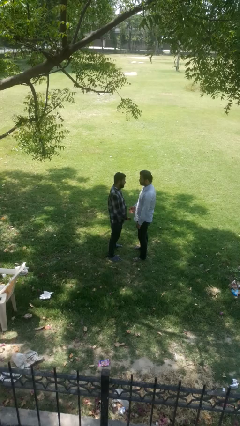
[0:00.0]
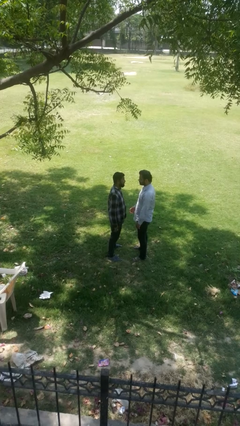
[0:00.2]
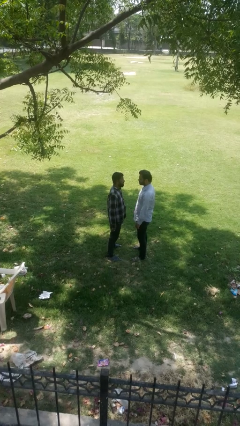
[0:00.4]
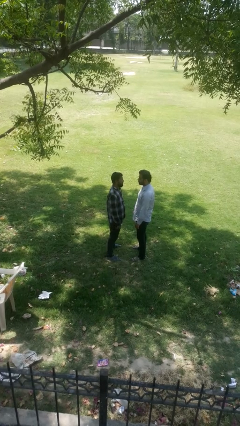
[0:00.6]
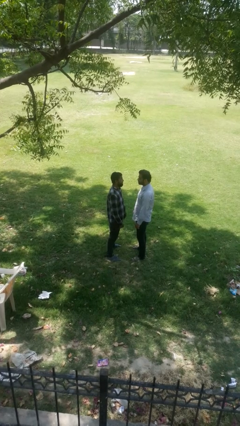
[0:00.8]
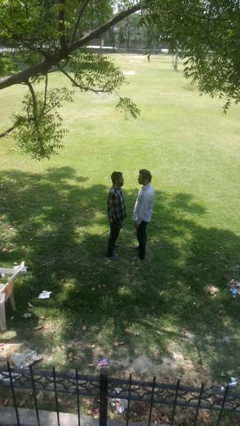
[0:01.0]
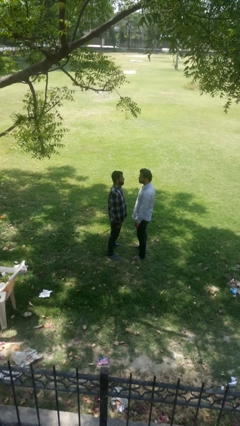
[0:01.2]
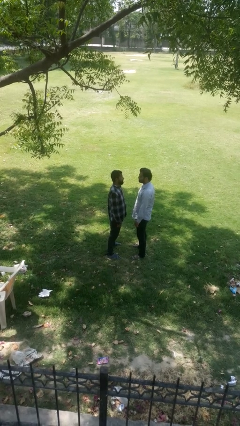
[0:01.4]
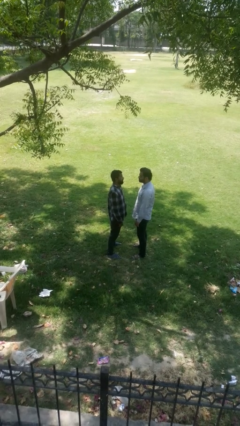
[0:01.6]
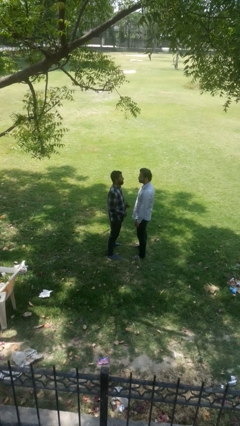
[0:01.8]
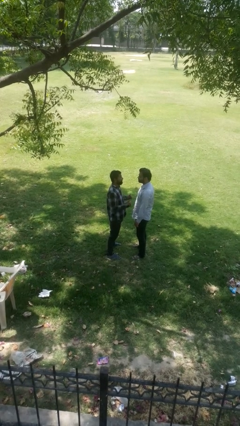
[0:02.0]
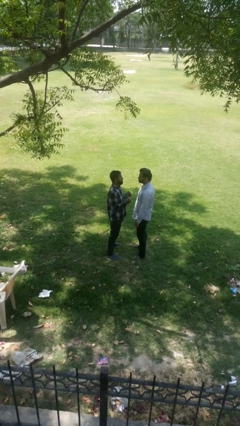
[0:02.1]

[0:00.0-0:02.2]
person highfives hand

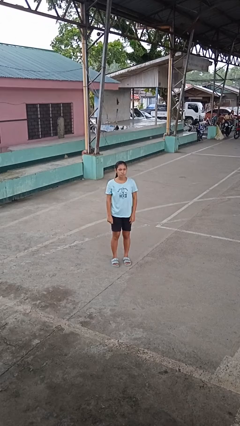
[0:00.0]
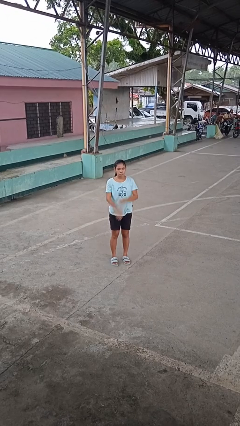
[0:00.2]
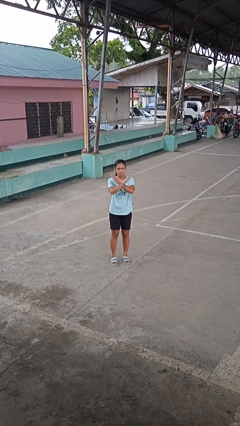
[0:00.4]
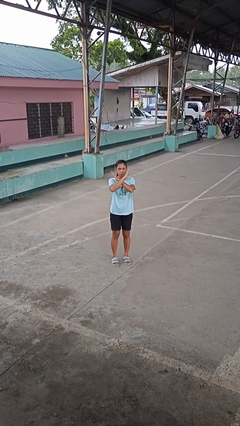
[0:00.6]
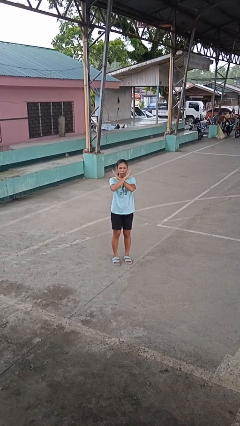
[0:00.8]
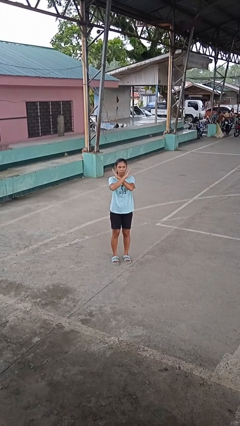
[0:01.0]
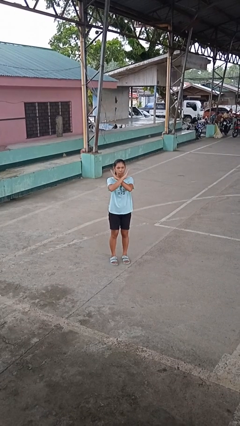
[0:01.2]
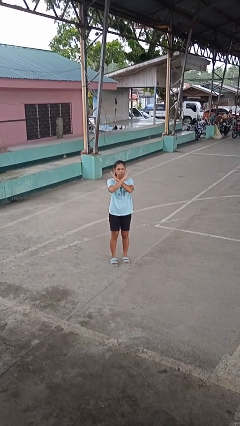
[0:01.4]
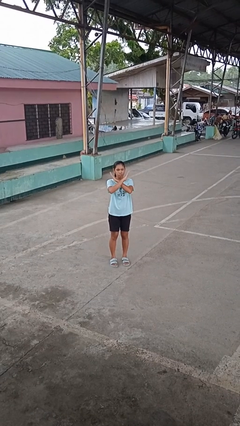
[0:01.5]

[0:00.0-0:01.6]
person gestures arms x

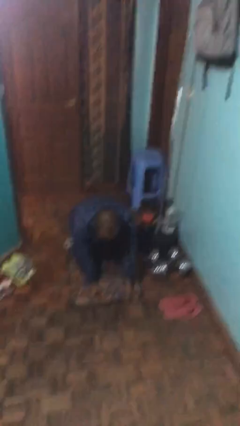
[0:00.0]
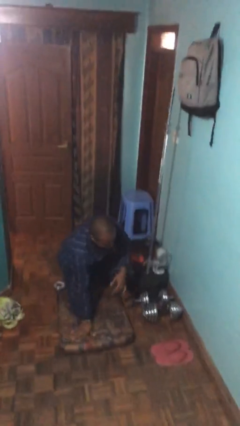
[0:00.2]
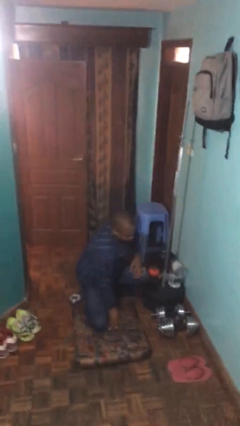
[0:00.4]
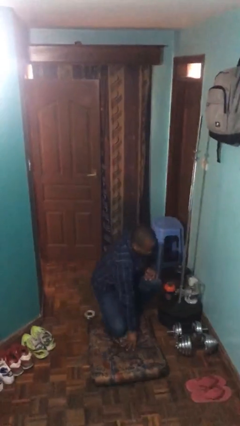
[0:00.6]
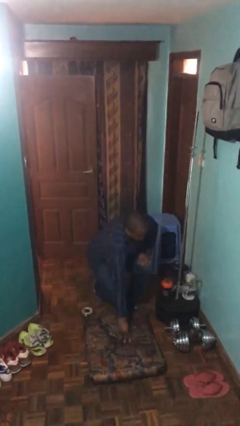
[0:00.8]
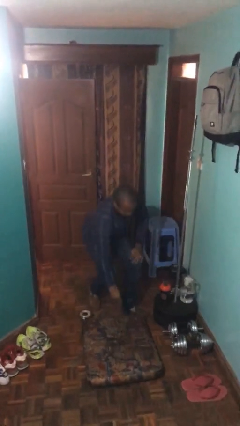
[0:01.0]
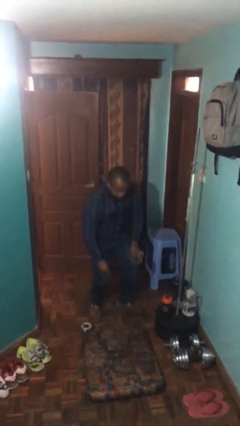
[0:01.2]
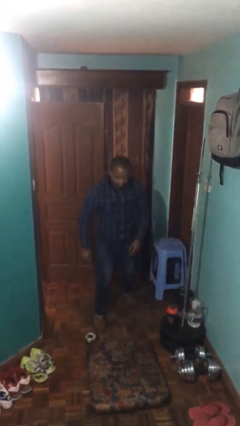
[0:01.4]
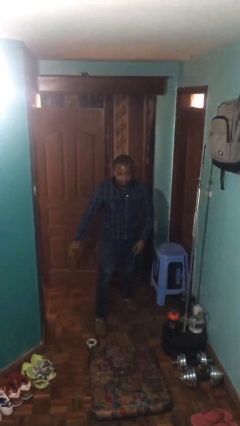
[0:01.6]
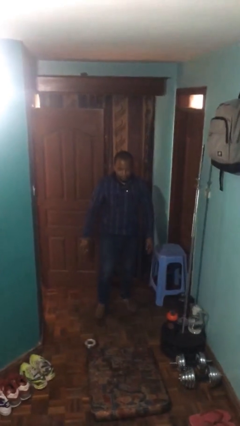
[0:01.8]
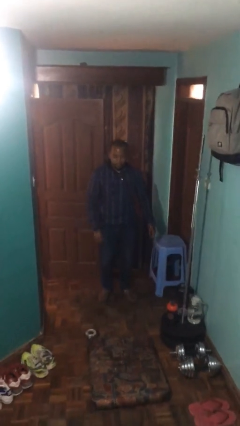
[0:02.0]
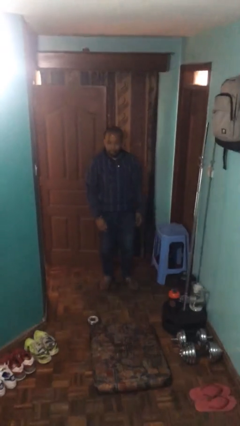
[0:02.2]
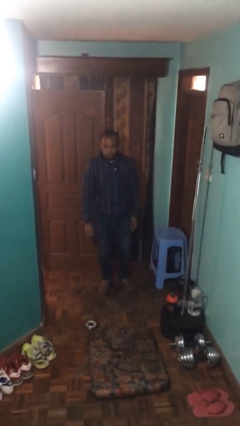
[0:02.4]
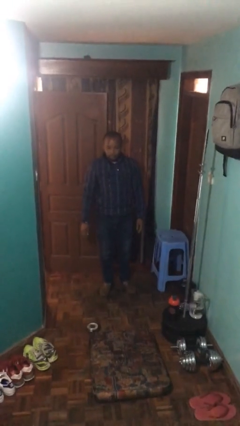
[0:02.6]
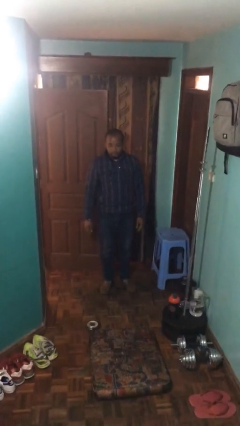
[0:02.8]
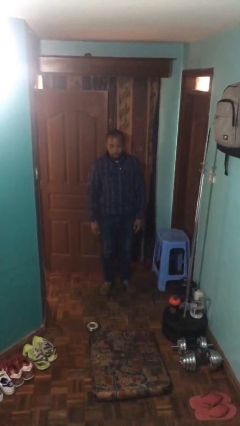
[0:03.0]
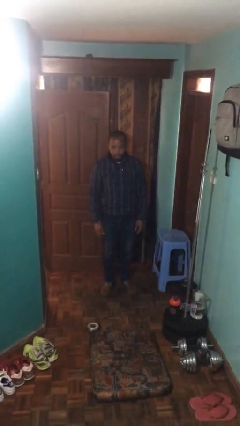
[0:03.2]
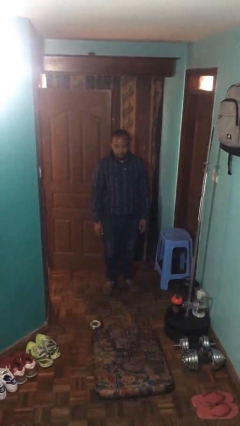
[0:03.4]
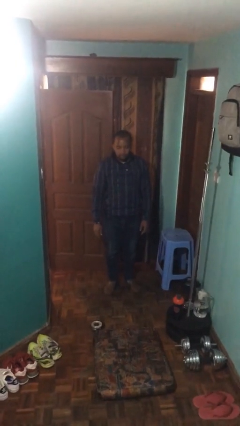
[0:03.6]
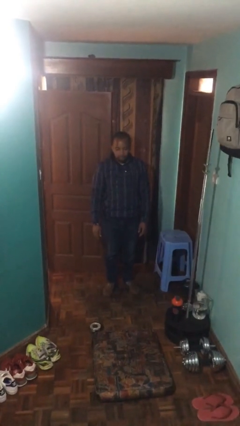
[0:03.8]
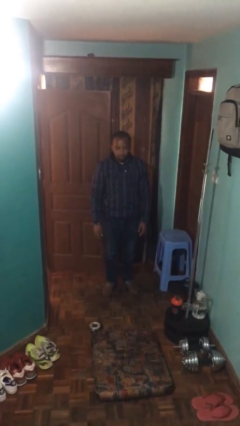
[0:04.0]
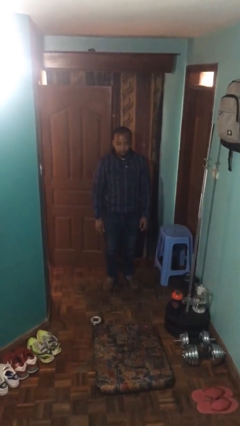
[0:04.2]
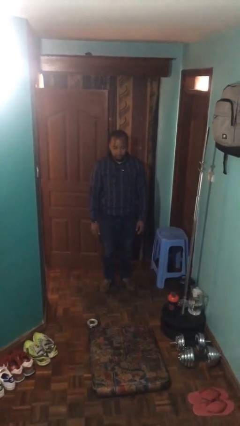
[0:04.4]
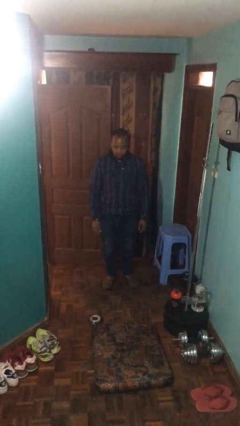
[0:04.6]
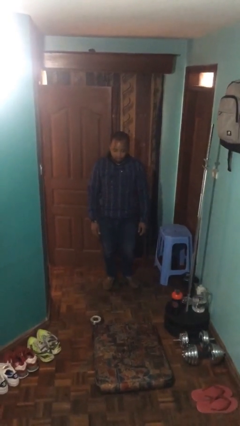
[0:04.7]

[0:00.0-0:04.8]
person stands up from floor

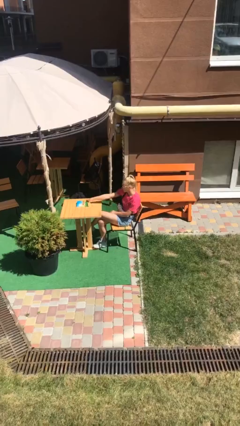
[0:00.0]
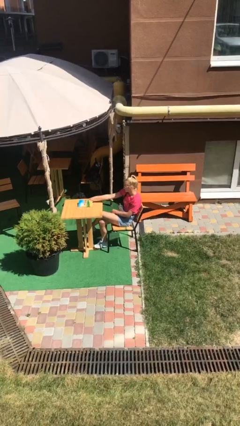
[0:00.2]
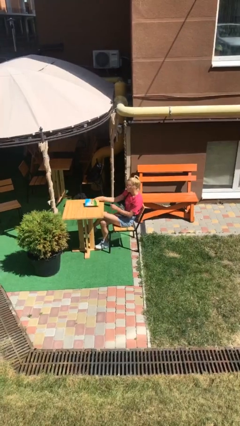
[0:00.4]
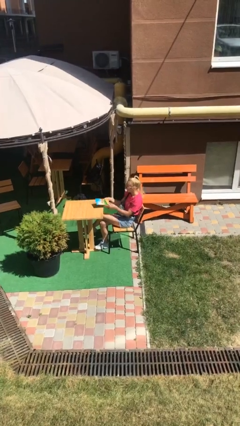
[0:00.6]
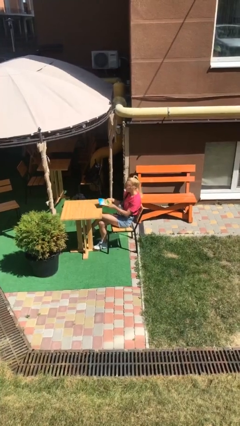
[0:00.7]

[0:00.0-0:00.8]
person picks up object from table

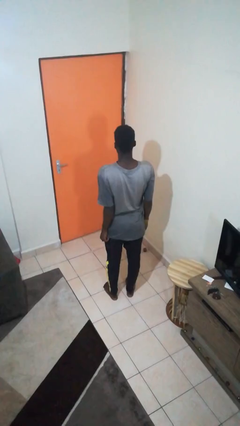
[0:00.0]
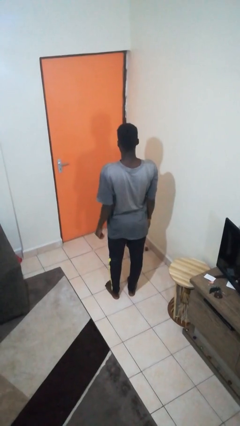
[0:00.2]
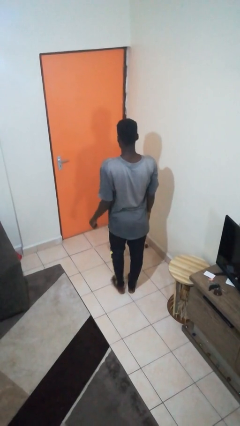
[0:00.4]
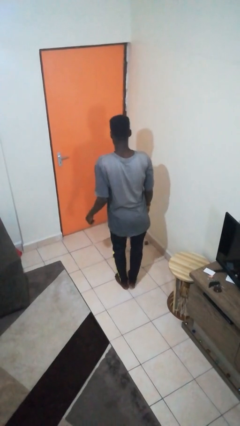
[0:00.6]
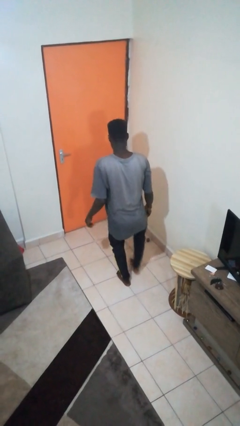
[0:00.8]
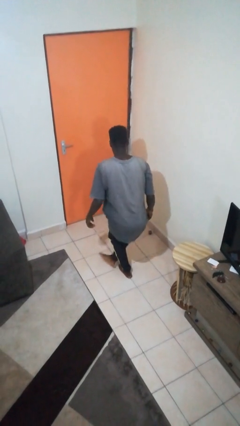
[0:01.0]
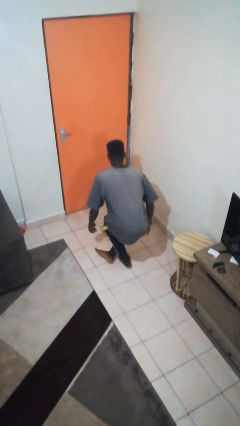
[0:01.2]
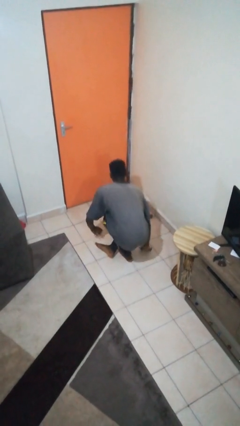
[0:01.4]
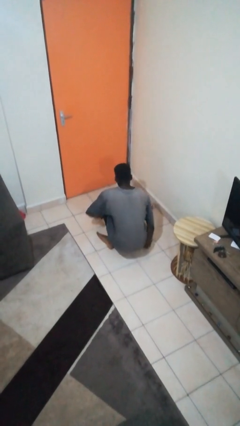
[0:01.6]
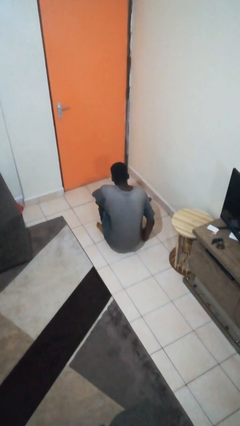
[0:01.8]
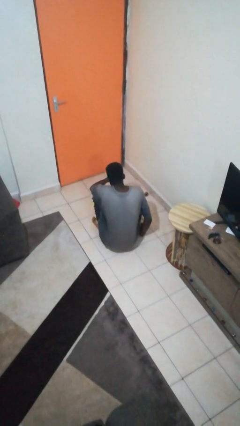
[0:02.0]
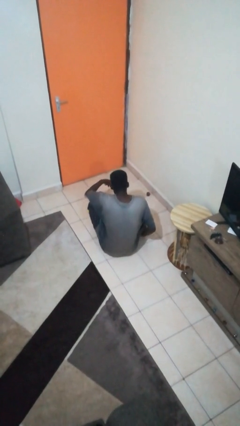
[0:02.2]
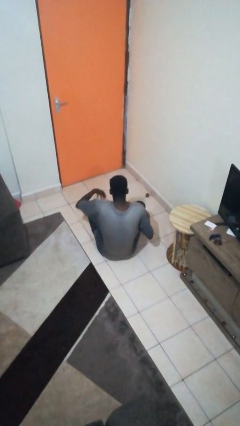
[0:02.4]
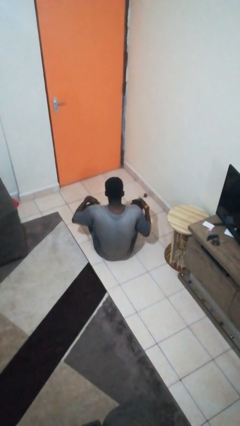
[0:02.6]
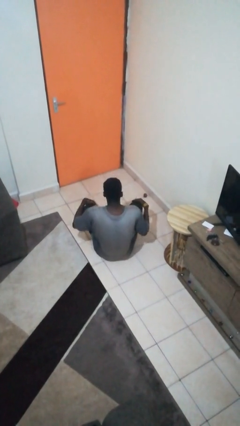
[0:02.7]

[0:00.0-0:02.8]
person sits crisscross

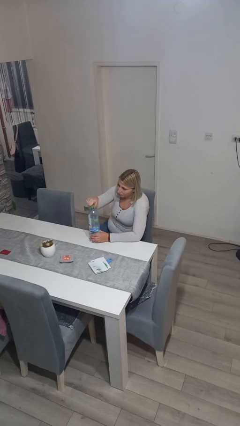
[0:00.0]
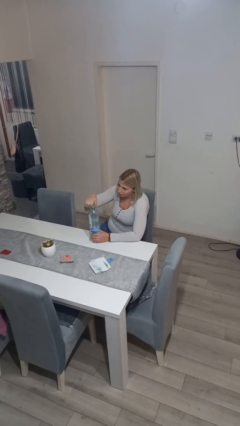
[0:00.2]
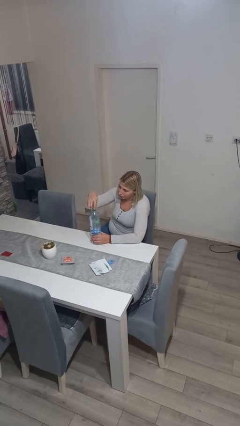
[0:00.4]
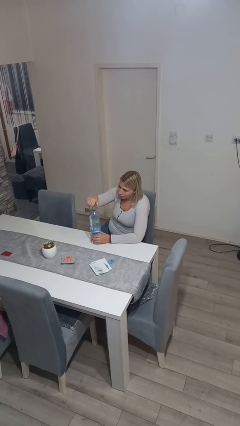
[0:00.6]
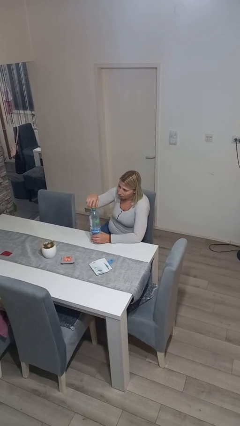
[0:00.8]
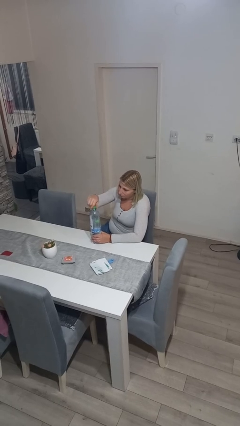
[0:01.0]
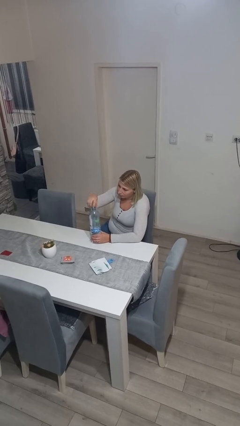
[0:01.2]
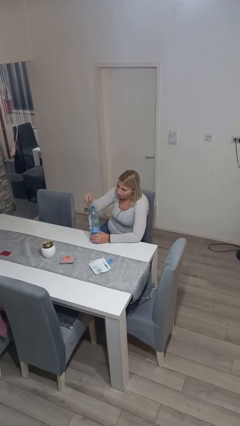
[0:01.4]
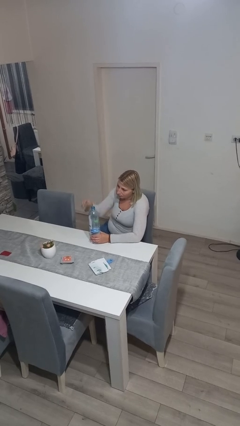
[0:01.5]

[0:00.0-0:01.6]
person unscrews lid from bottle

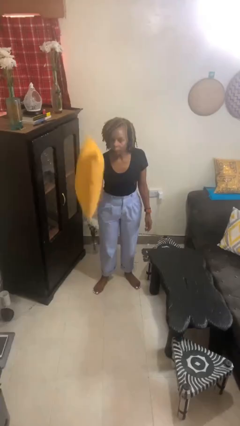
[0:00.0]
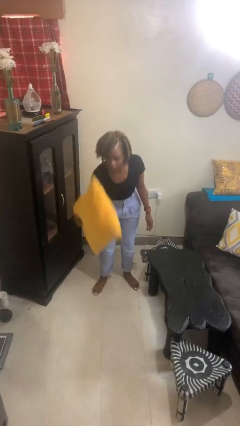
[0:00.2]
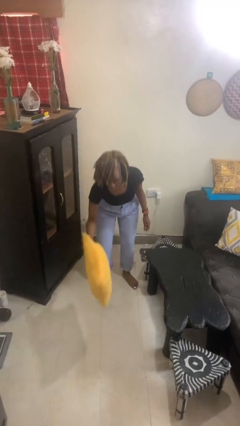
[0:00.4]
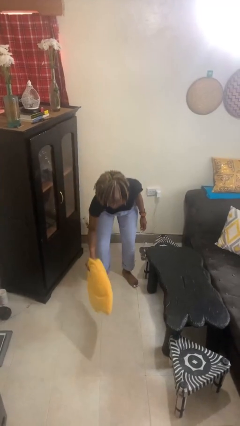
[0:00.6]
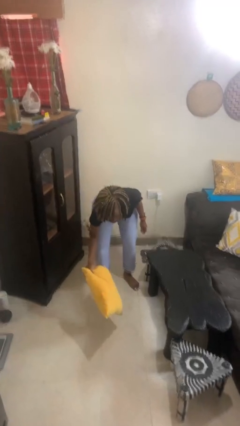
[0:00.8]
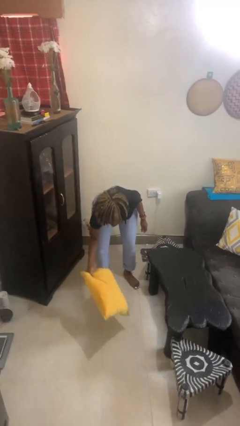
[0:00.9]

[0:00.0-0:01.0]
person catches dropped object

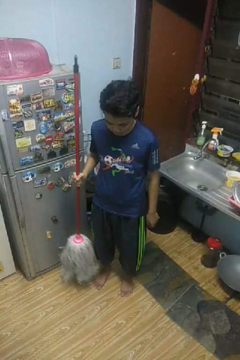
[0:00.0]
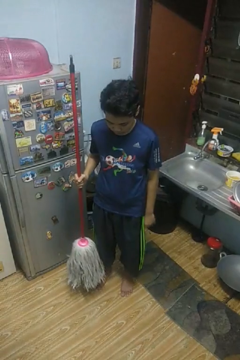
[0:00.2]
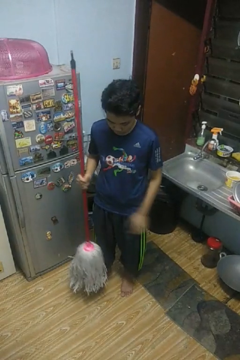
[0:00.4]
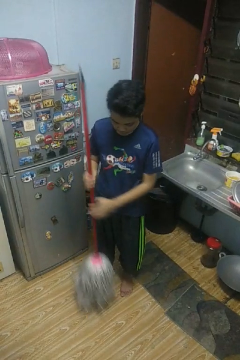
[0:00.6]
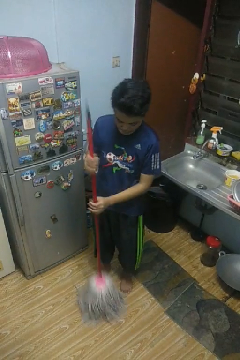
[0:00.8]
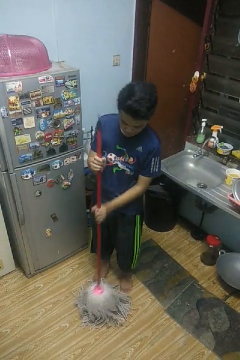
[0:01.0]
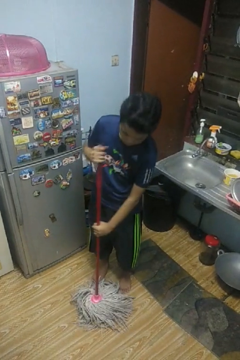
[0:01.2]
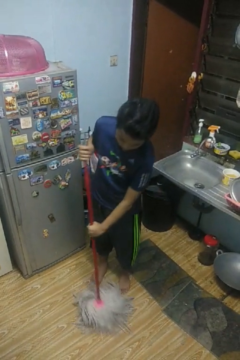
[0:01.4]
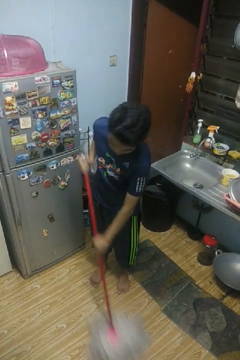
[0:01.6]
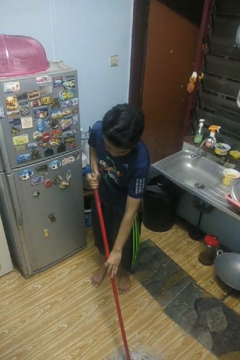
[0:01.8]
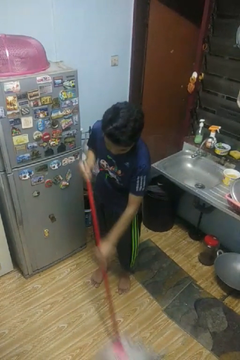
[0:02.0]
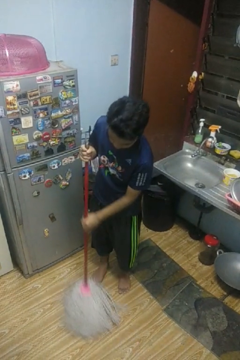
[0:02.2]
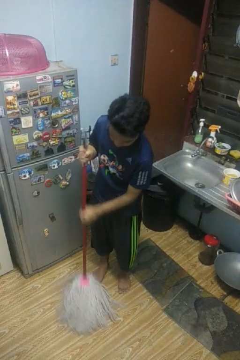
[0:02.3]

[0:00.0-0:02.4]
person mops
